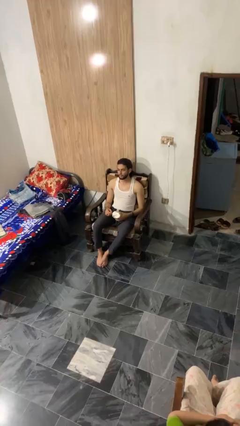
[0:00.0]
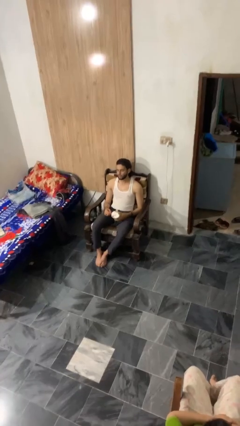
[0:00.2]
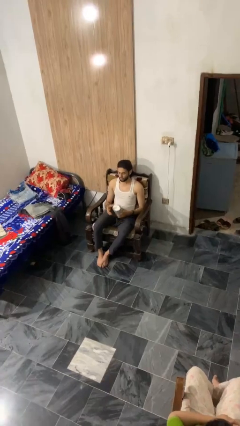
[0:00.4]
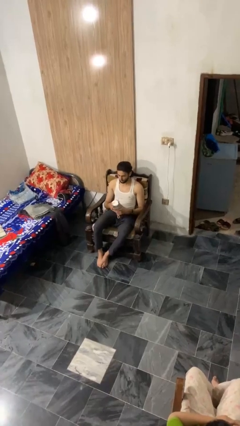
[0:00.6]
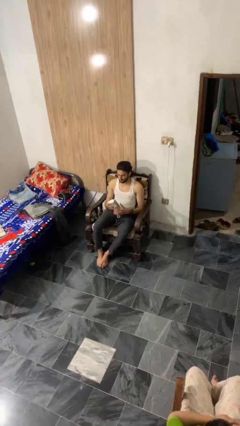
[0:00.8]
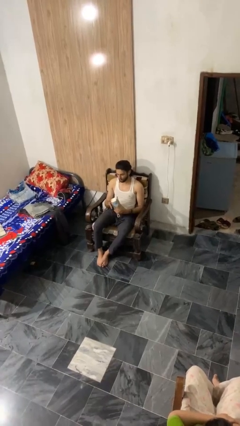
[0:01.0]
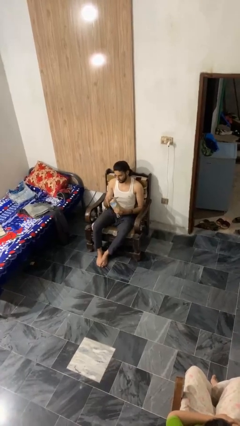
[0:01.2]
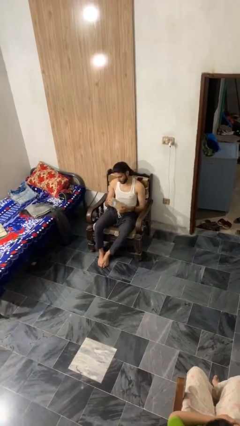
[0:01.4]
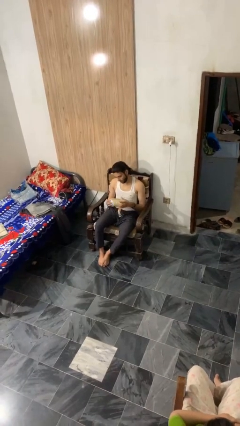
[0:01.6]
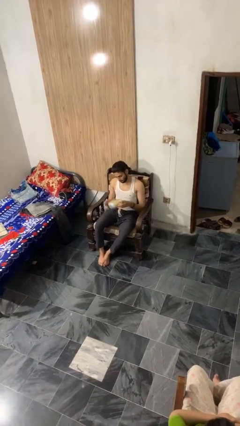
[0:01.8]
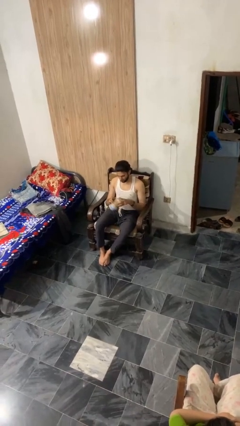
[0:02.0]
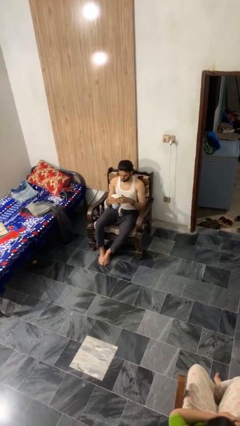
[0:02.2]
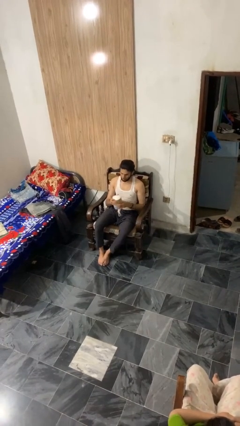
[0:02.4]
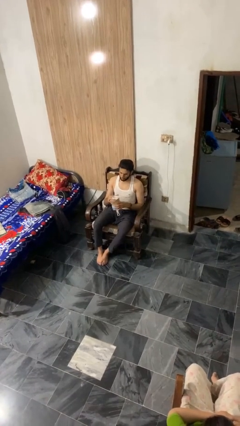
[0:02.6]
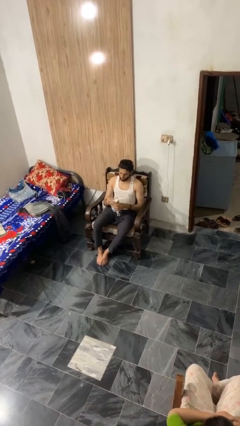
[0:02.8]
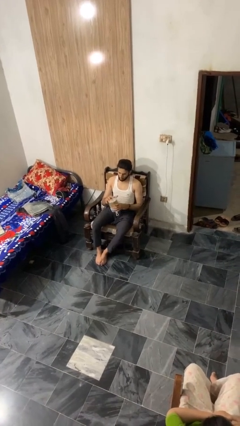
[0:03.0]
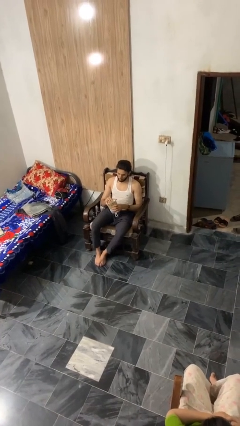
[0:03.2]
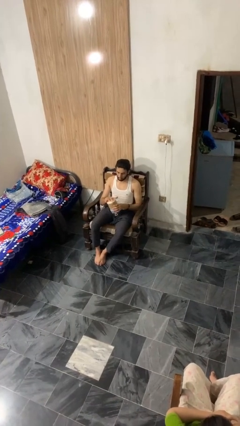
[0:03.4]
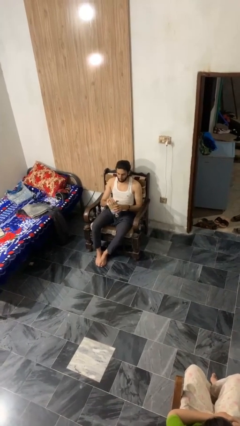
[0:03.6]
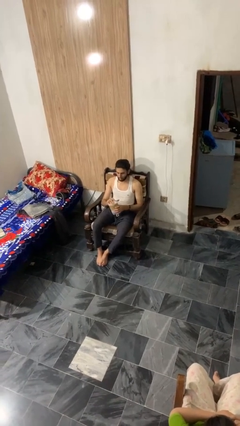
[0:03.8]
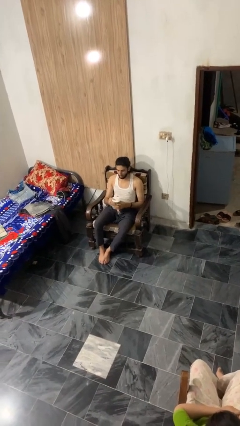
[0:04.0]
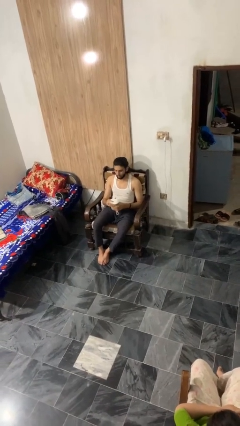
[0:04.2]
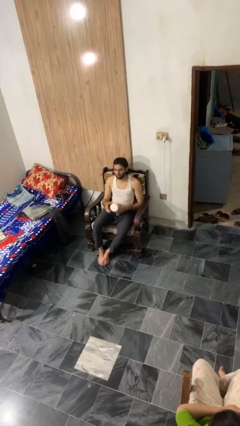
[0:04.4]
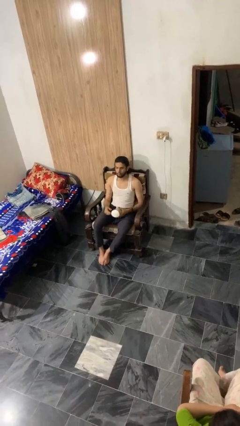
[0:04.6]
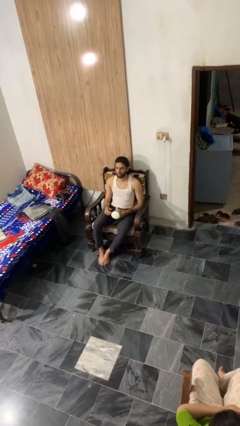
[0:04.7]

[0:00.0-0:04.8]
person squeezes object

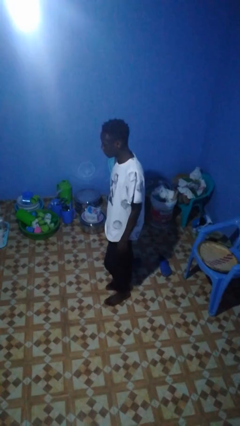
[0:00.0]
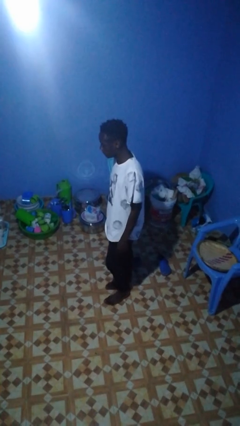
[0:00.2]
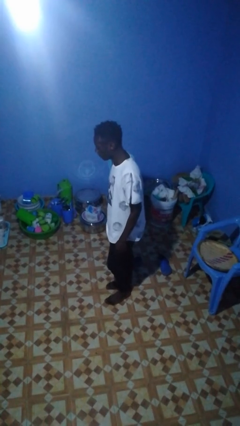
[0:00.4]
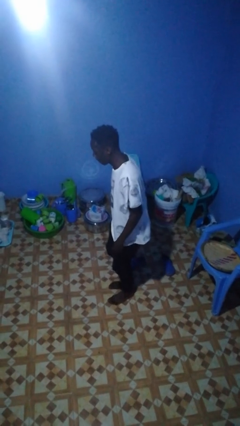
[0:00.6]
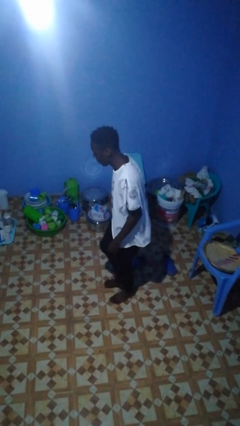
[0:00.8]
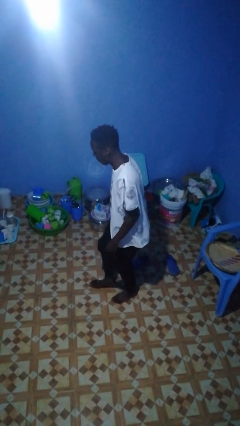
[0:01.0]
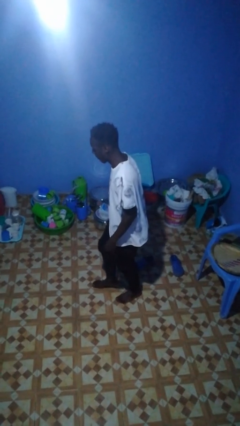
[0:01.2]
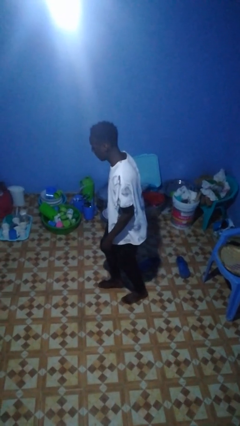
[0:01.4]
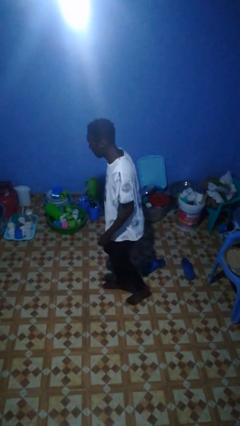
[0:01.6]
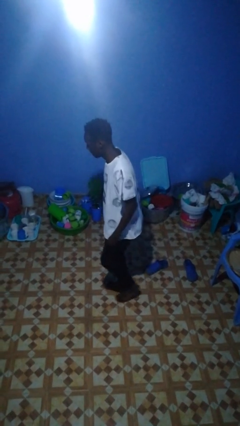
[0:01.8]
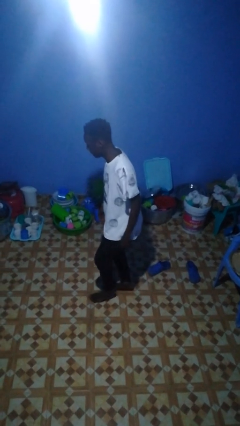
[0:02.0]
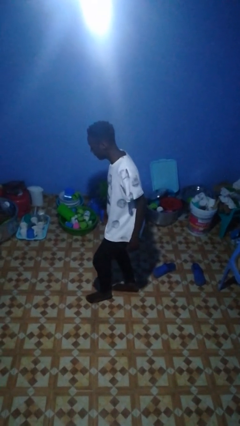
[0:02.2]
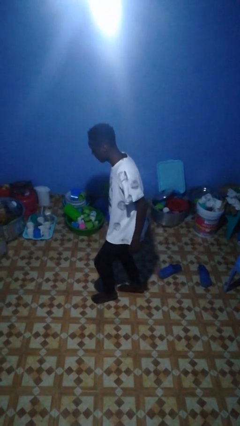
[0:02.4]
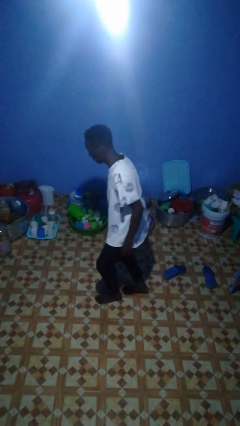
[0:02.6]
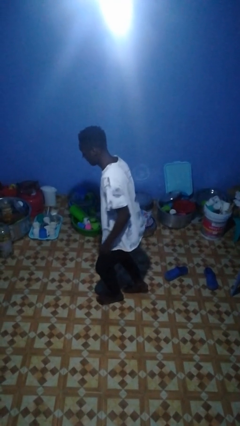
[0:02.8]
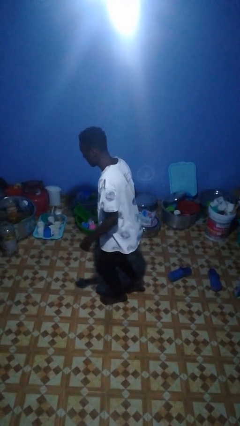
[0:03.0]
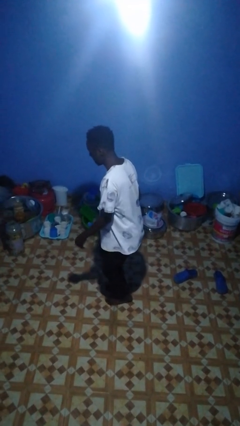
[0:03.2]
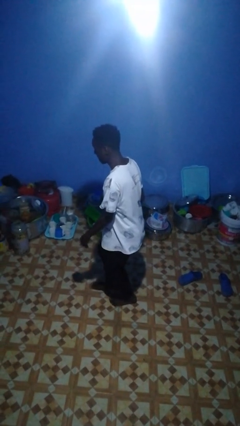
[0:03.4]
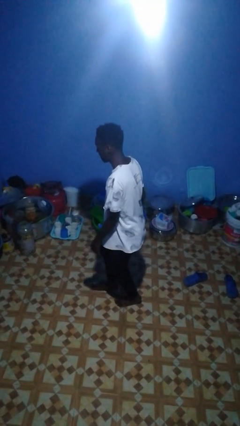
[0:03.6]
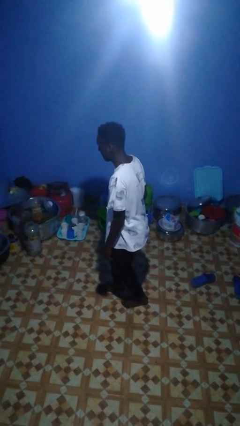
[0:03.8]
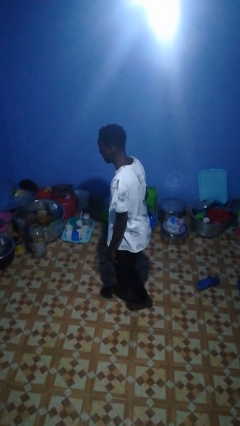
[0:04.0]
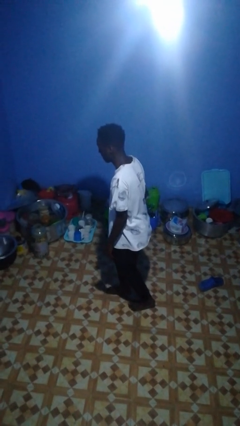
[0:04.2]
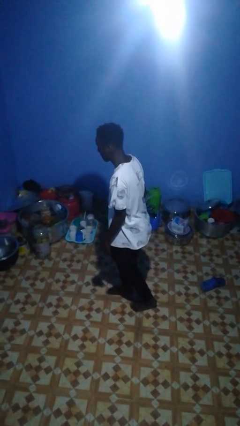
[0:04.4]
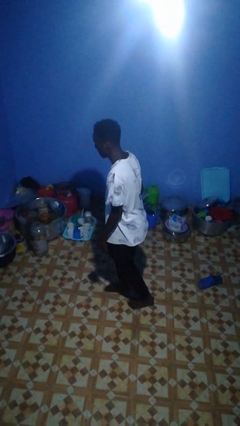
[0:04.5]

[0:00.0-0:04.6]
person walks tiptoe

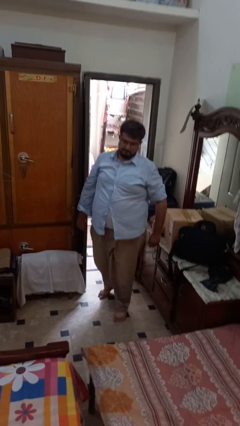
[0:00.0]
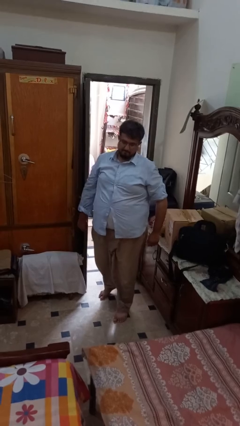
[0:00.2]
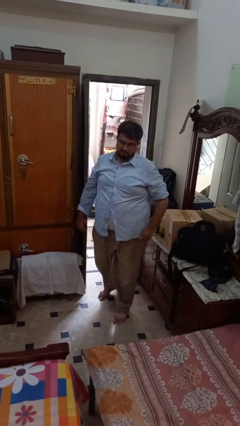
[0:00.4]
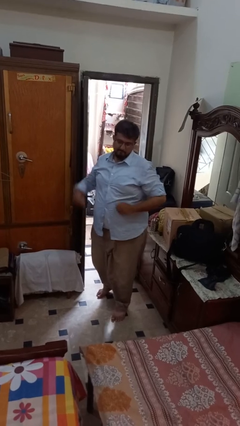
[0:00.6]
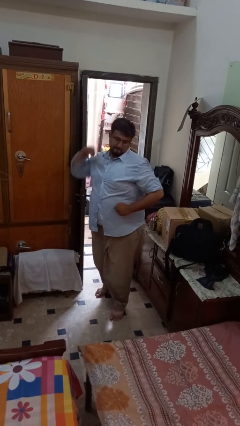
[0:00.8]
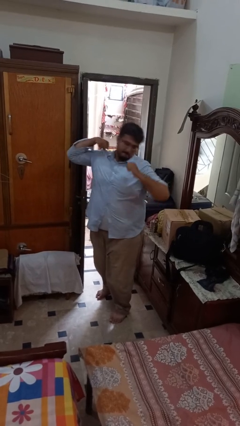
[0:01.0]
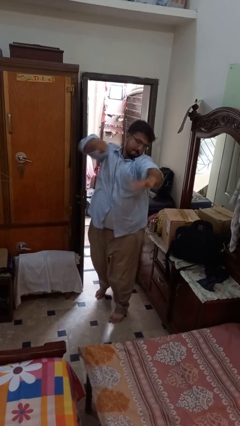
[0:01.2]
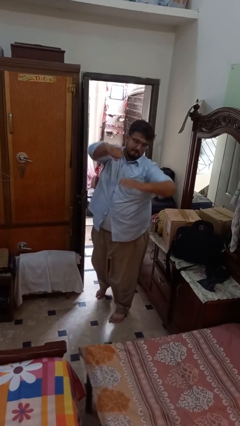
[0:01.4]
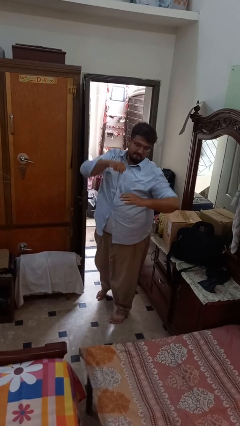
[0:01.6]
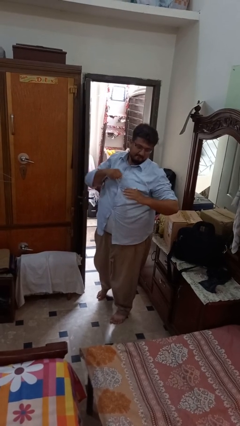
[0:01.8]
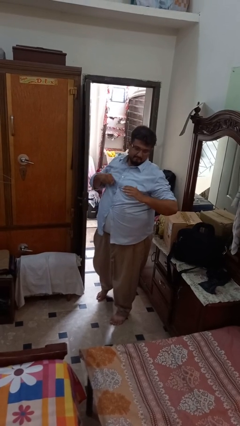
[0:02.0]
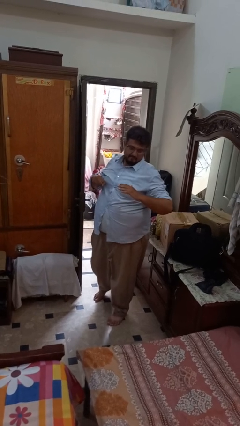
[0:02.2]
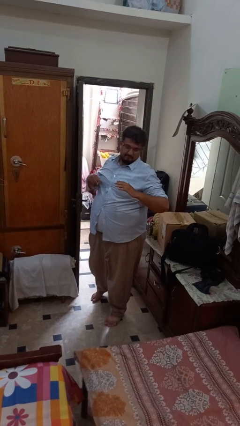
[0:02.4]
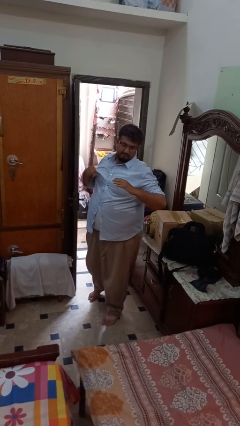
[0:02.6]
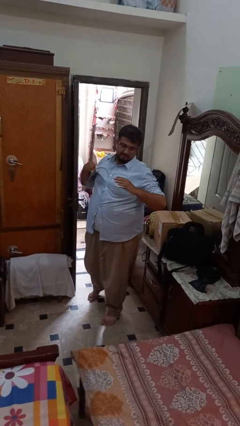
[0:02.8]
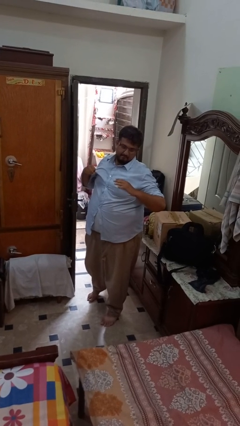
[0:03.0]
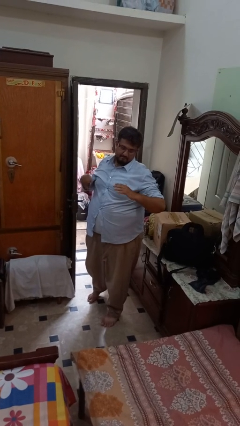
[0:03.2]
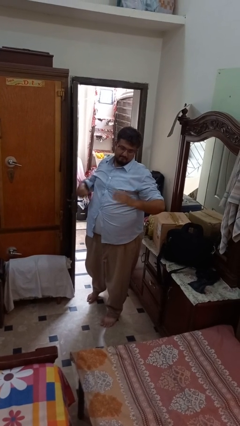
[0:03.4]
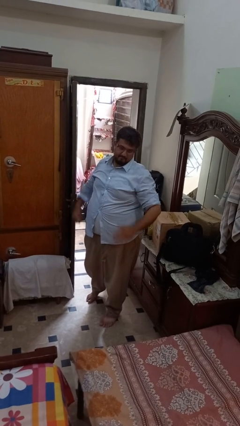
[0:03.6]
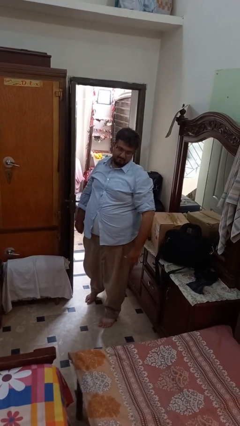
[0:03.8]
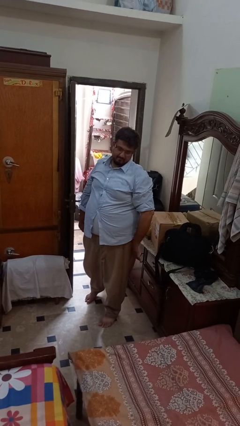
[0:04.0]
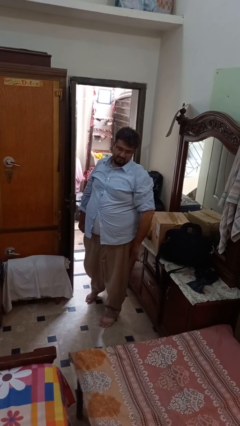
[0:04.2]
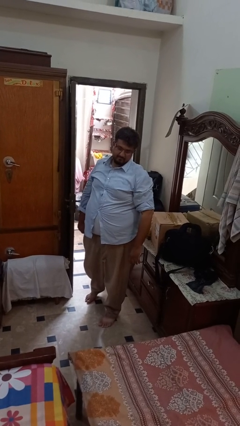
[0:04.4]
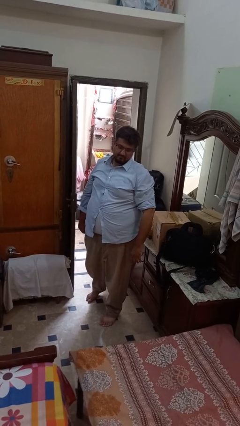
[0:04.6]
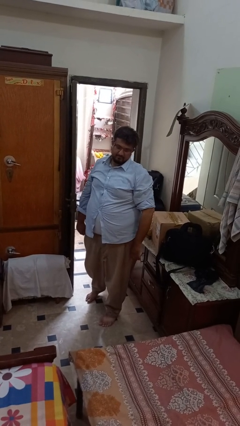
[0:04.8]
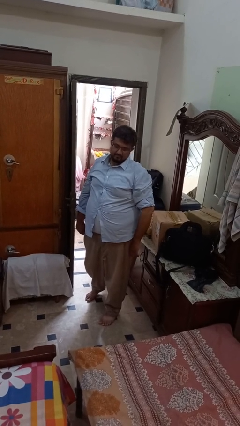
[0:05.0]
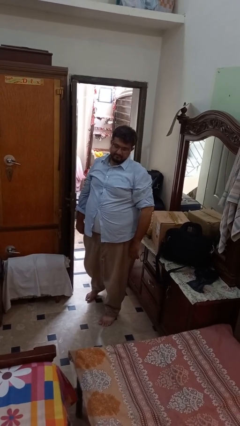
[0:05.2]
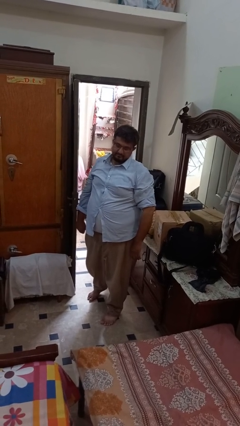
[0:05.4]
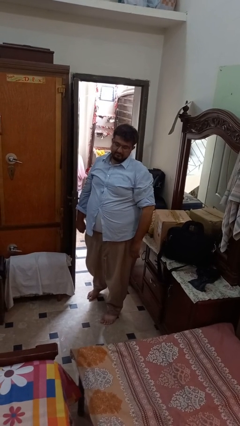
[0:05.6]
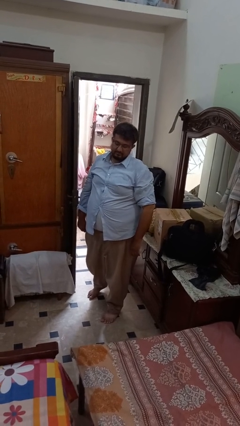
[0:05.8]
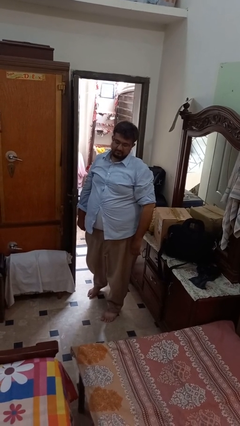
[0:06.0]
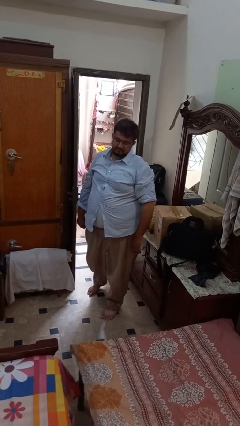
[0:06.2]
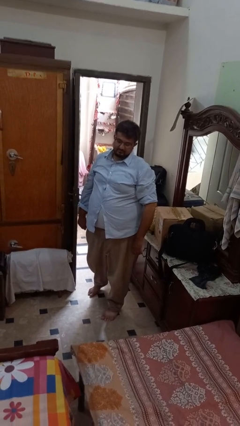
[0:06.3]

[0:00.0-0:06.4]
person karate chop

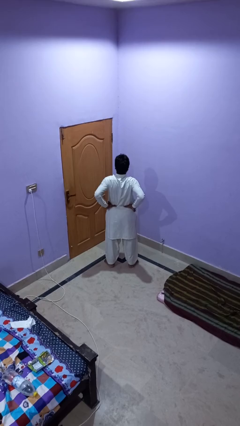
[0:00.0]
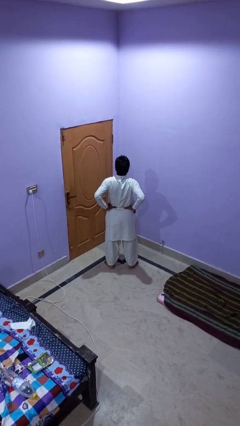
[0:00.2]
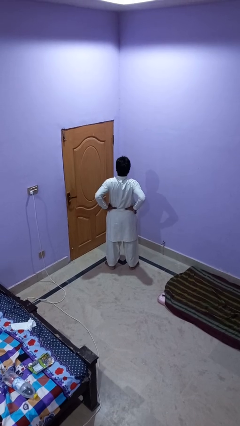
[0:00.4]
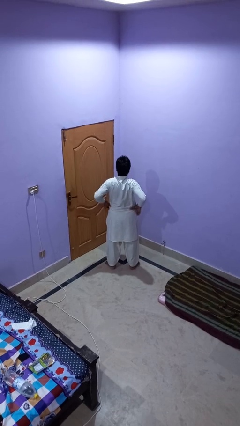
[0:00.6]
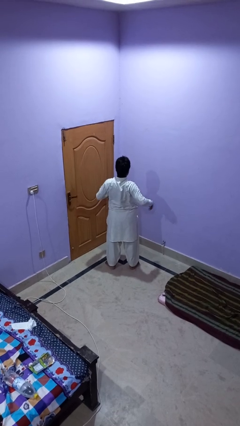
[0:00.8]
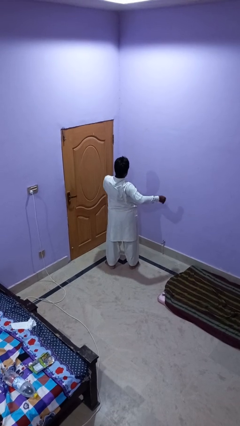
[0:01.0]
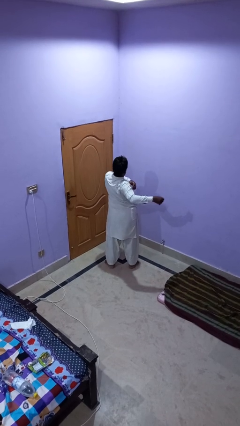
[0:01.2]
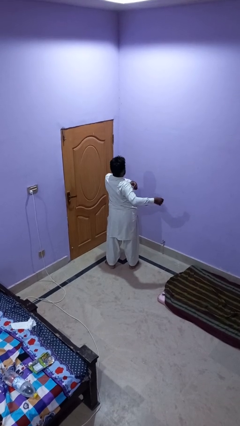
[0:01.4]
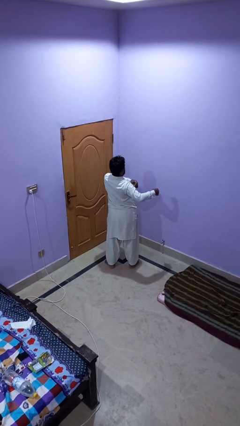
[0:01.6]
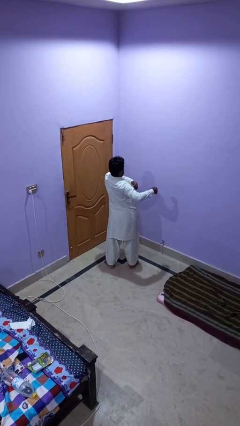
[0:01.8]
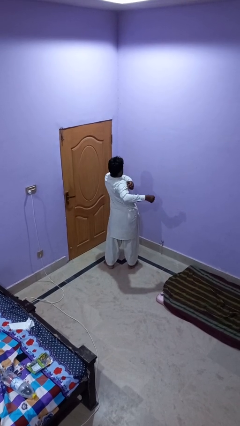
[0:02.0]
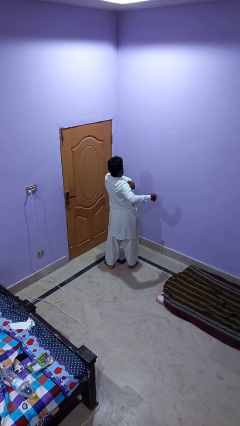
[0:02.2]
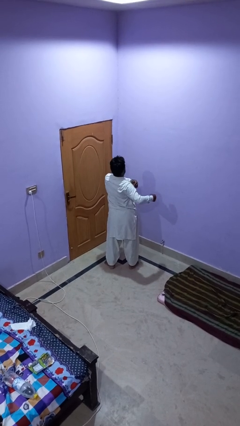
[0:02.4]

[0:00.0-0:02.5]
person stretches arms to side
